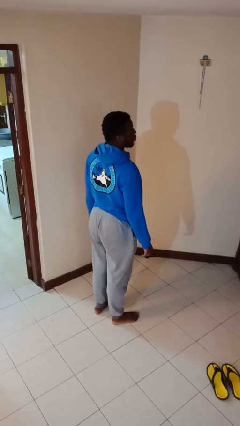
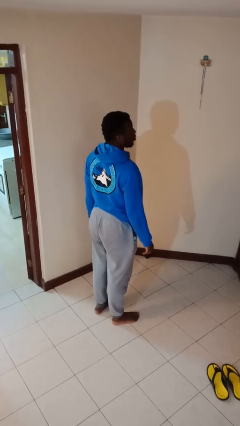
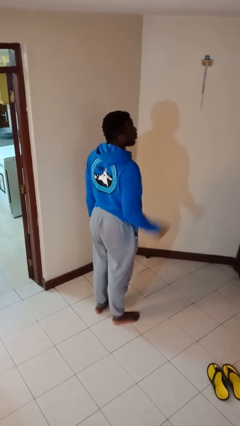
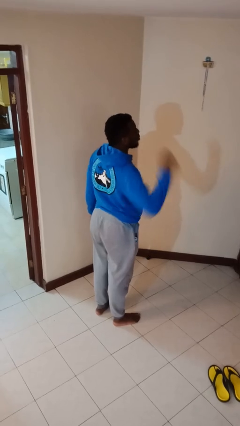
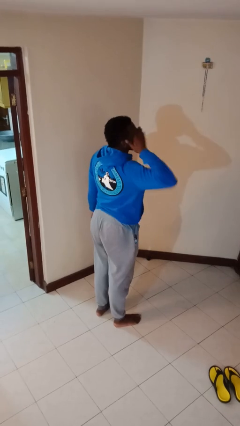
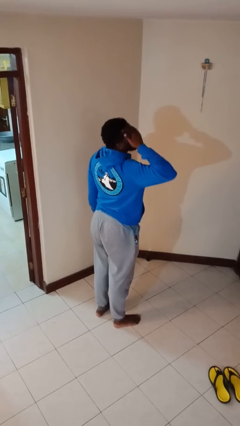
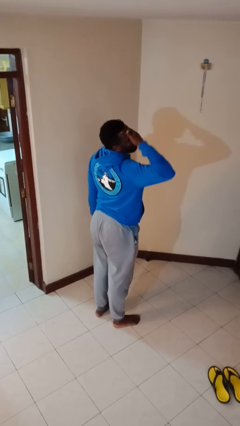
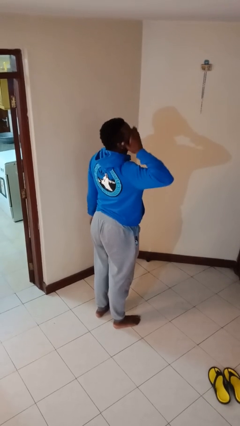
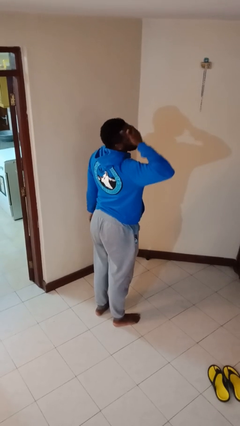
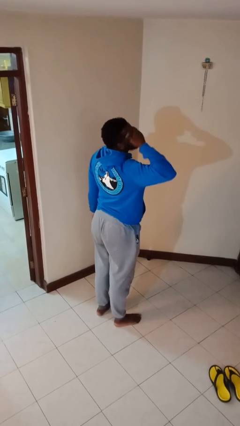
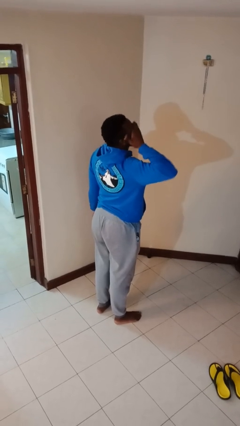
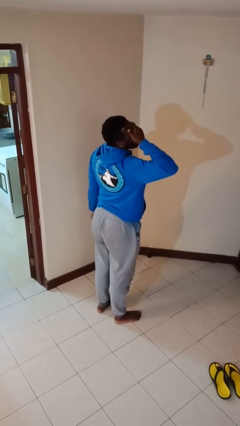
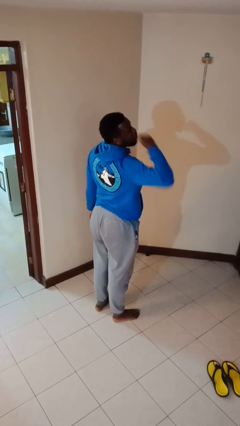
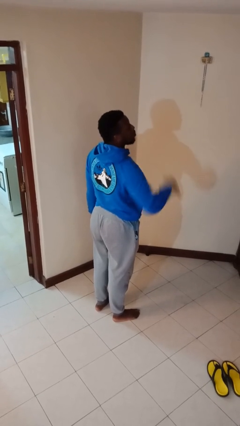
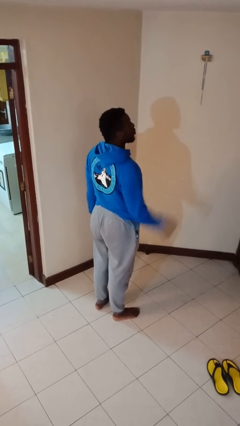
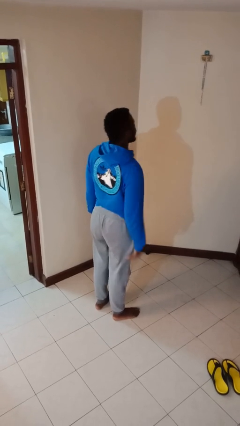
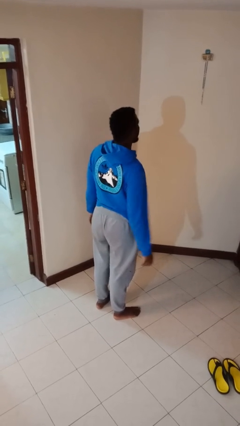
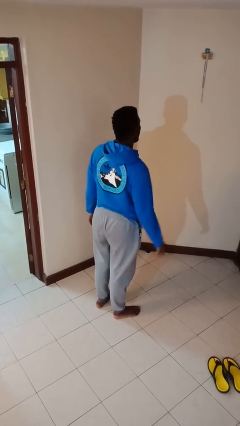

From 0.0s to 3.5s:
person rubs eyes

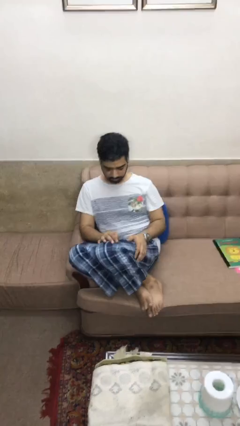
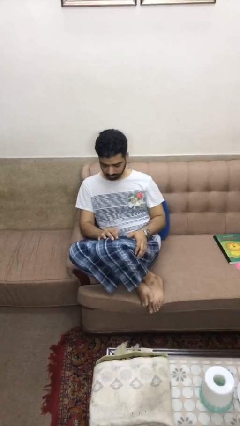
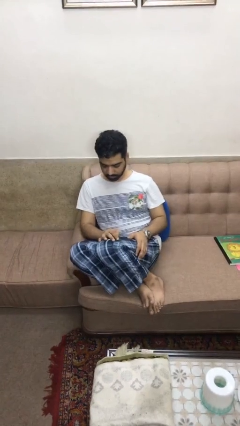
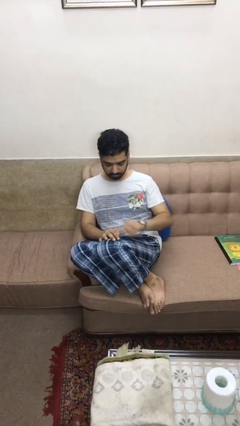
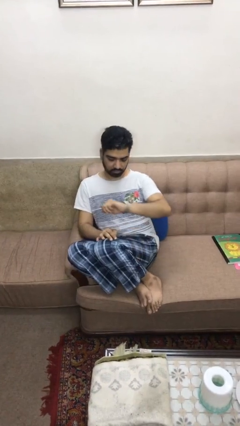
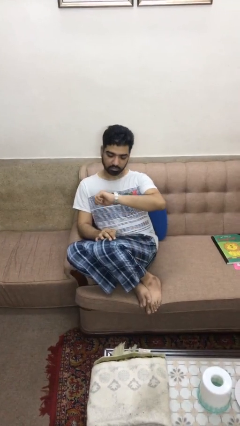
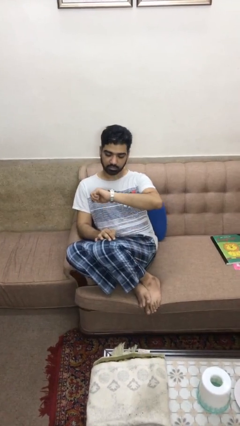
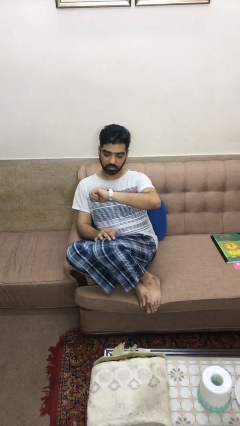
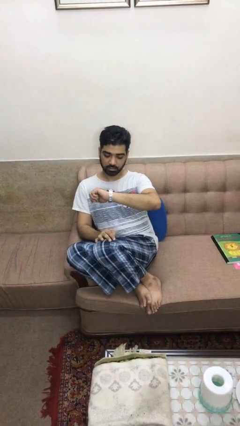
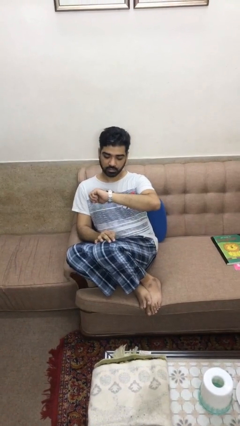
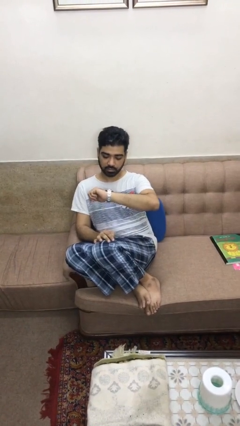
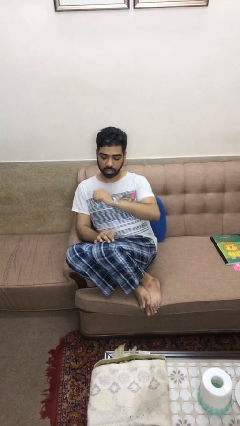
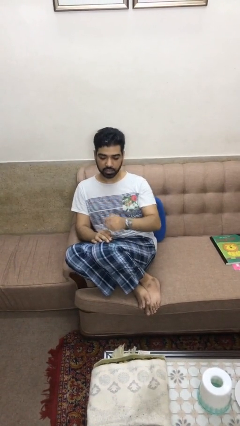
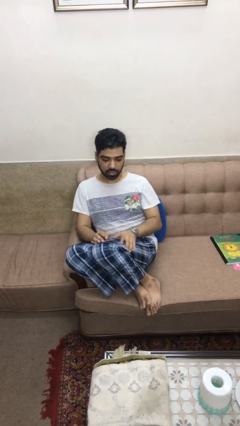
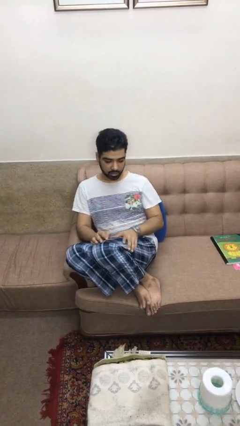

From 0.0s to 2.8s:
person looks at wristwatch

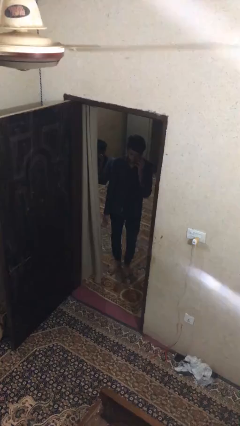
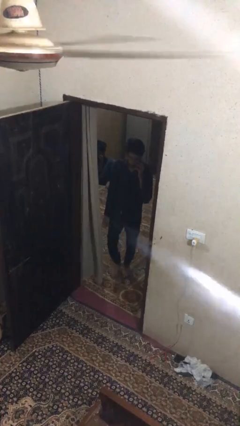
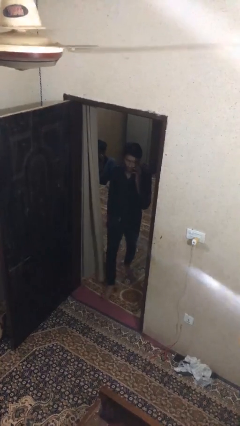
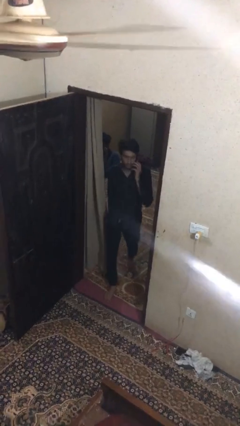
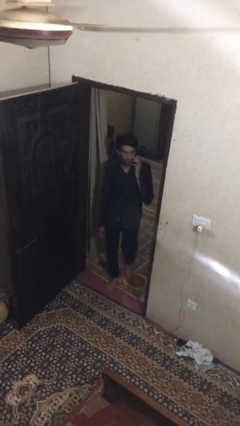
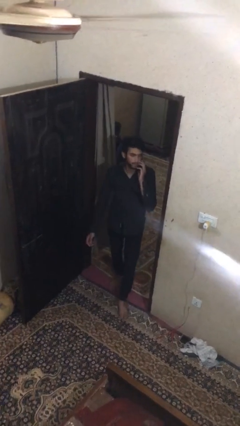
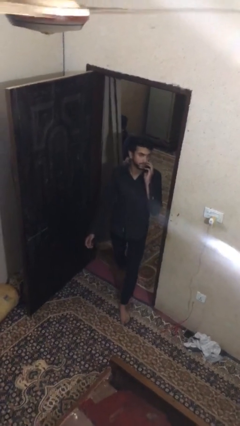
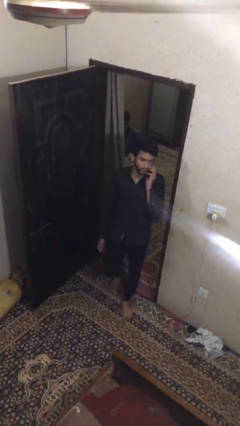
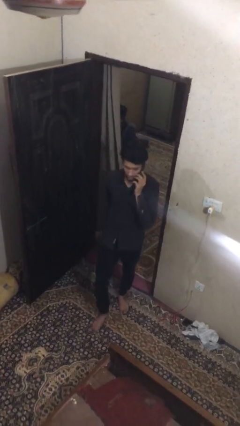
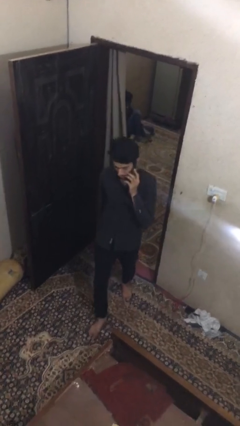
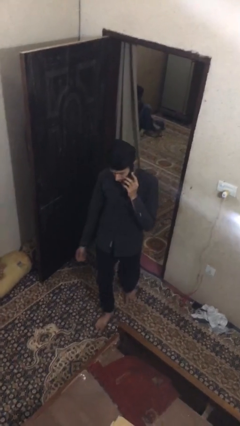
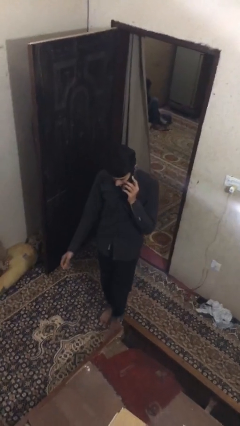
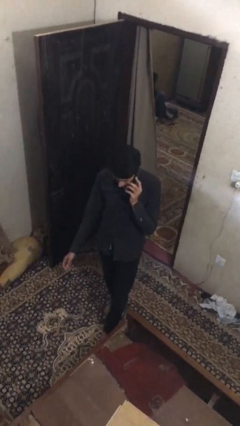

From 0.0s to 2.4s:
person enters scene through structure

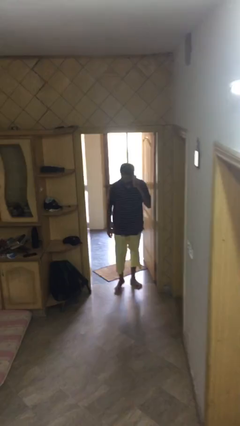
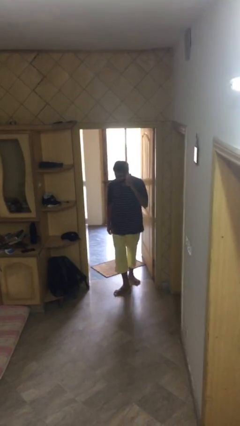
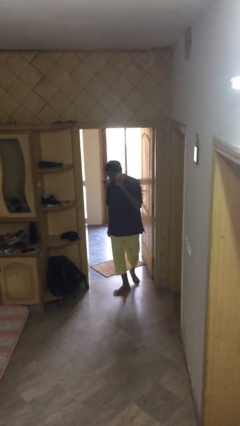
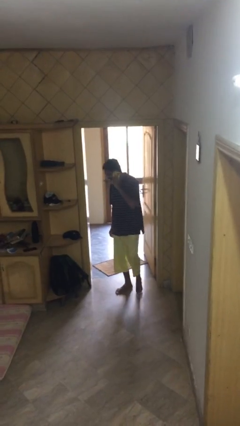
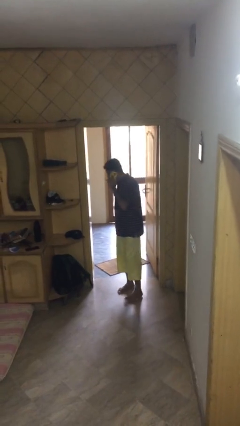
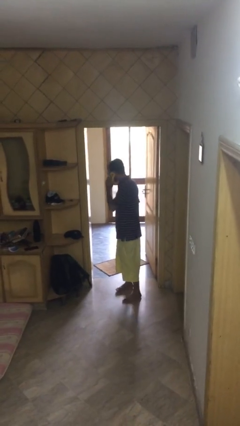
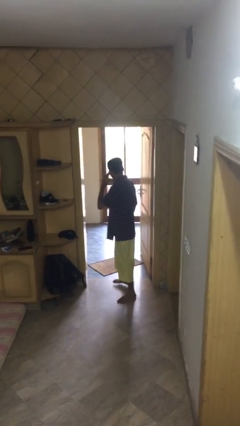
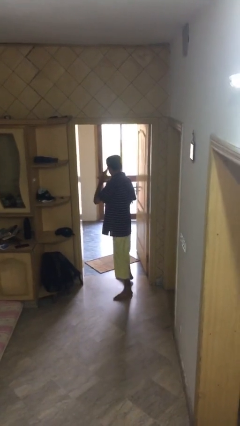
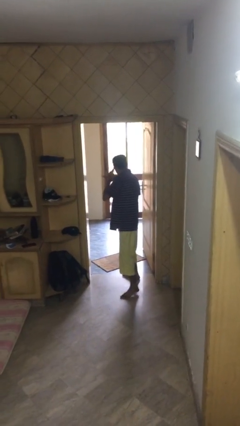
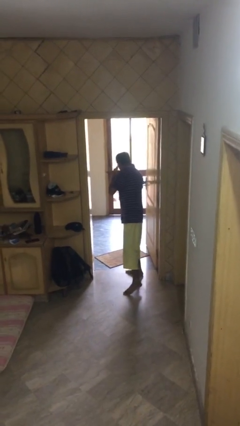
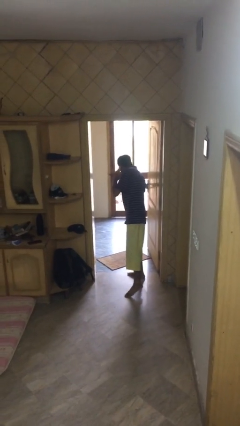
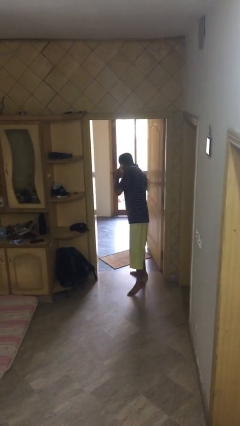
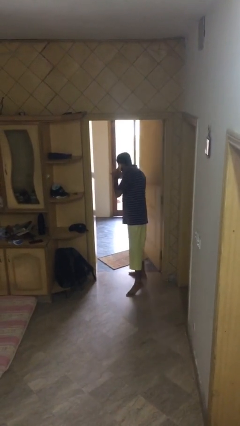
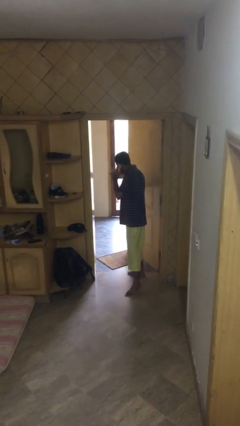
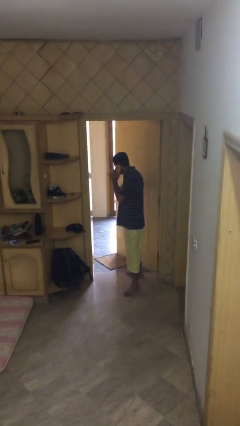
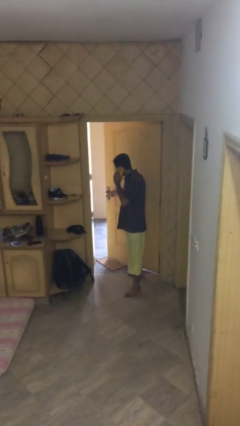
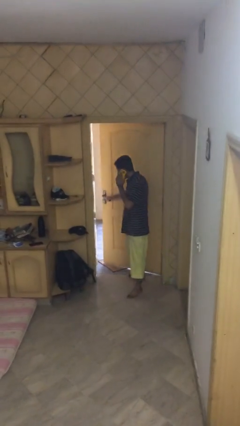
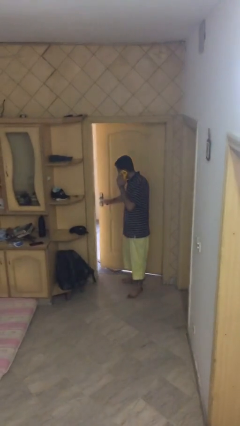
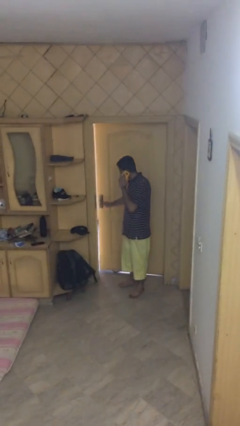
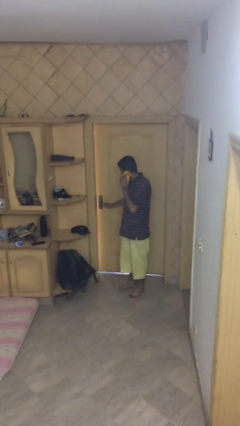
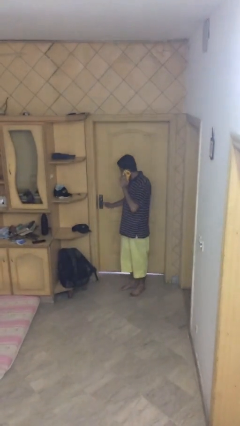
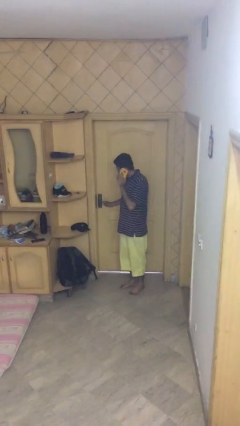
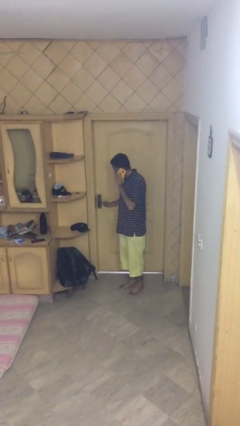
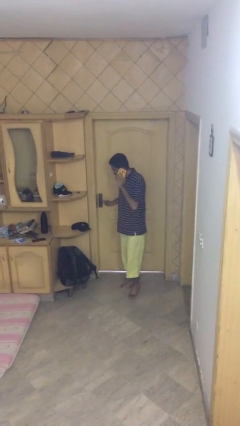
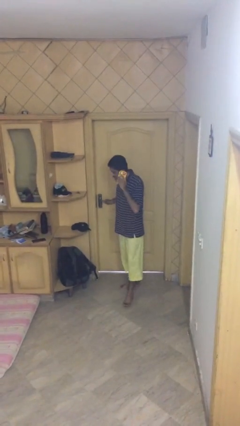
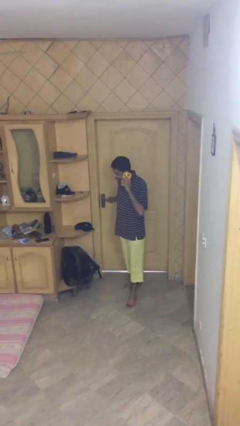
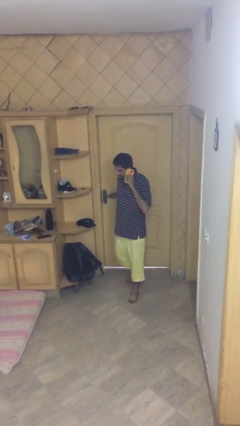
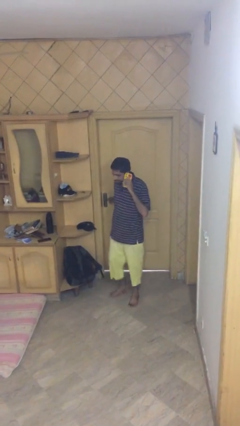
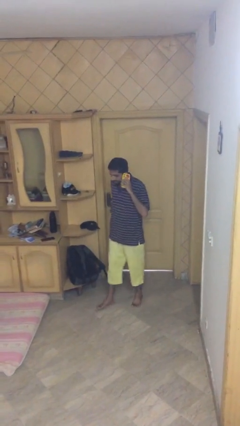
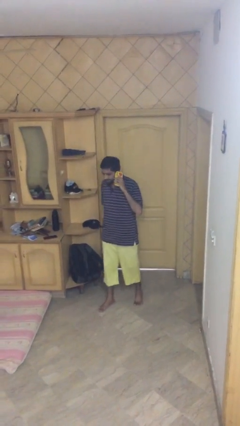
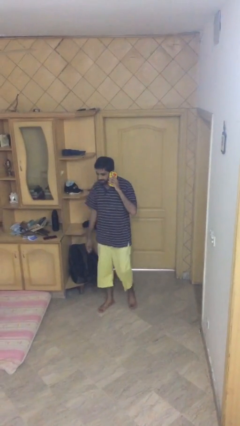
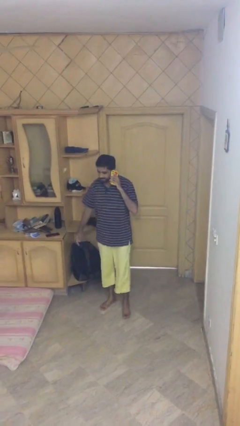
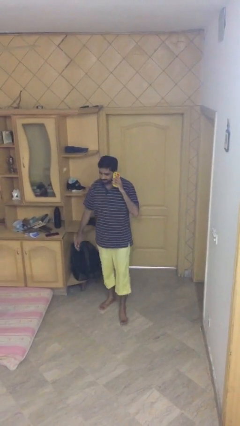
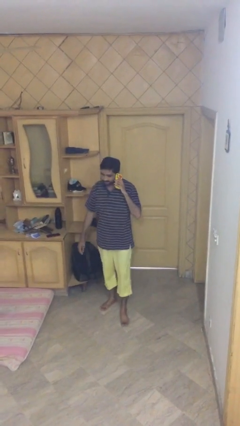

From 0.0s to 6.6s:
person closes facility door

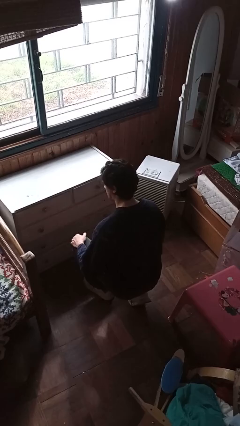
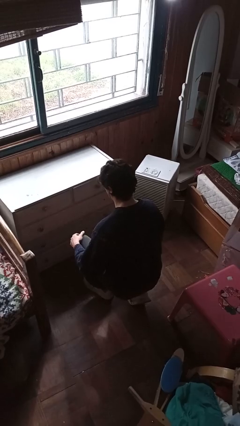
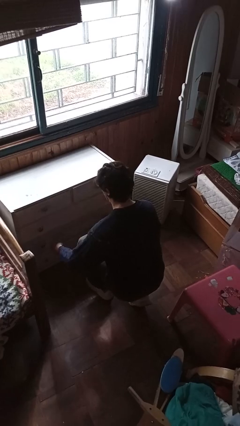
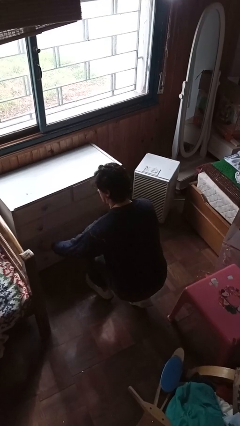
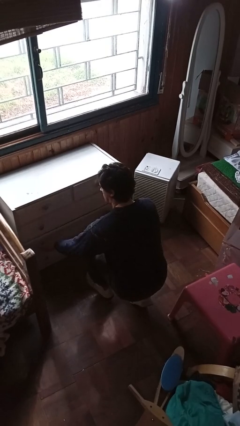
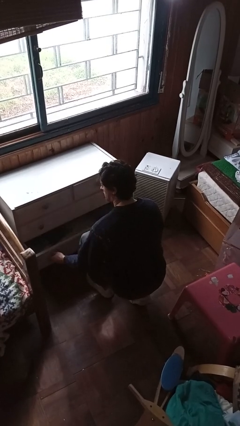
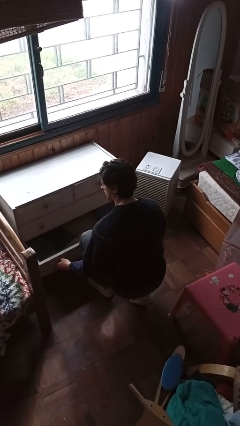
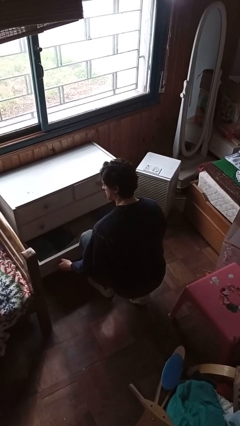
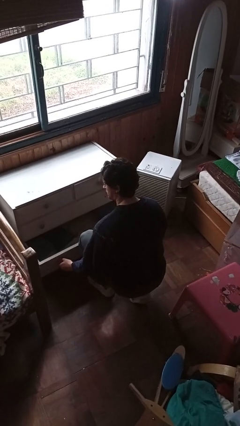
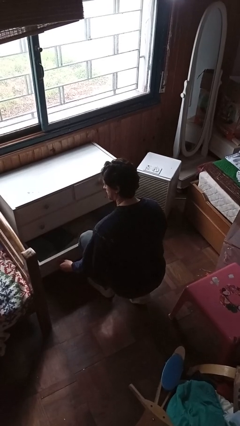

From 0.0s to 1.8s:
person opens dresser drawer

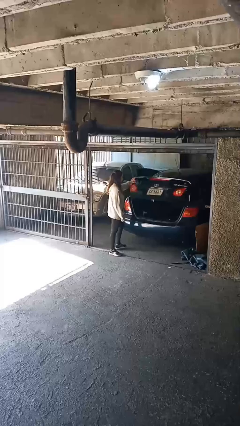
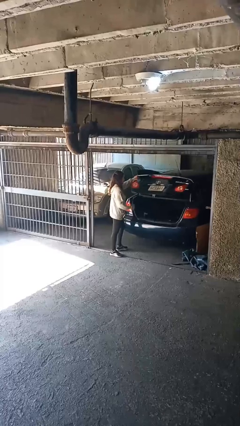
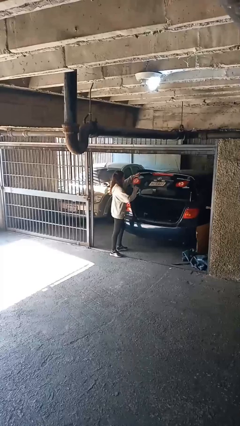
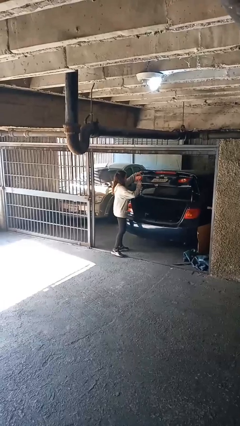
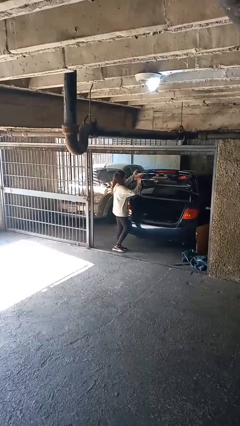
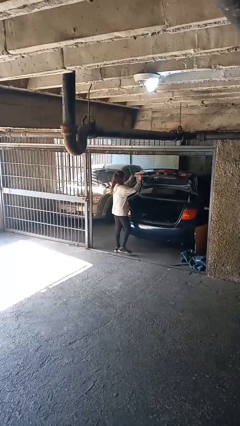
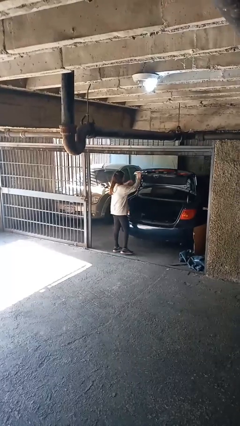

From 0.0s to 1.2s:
person opens car trunk
